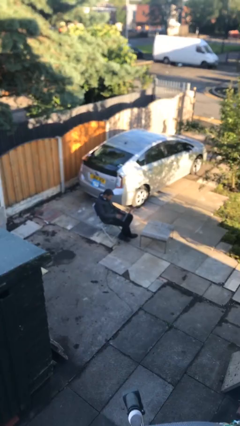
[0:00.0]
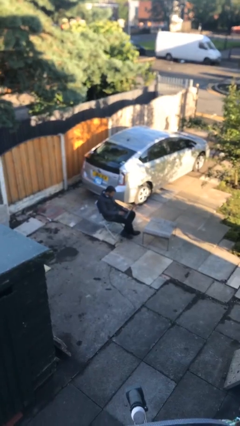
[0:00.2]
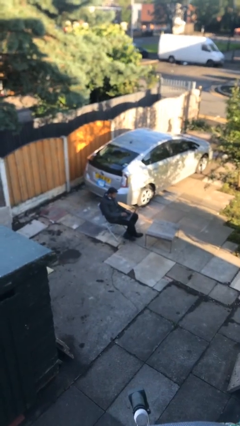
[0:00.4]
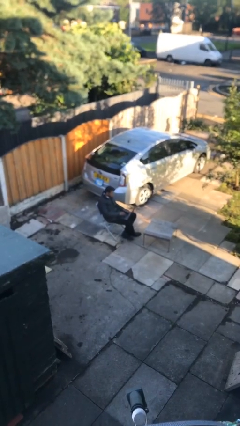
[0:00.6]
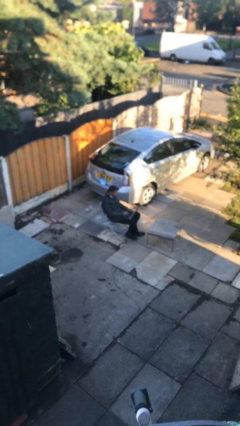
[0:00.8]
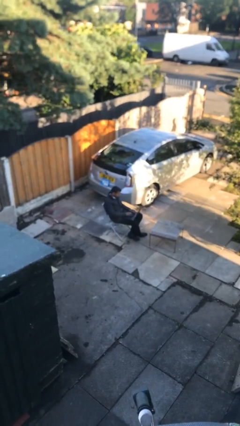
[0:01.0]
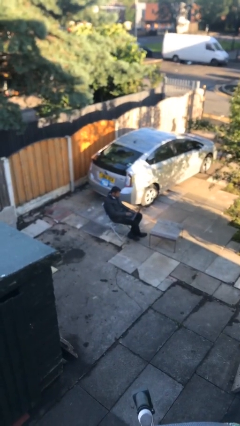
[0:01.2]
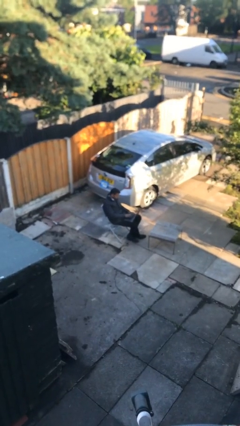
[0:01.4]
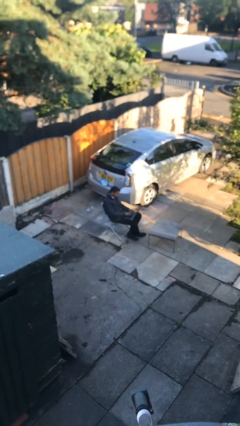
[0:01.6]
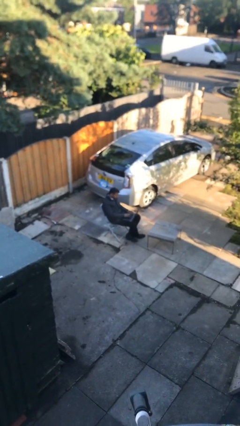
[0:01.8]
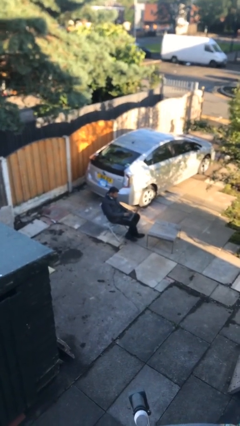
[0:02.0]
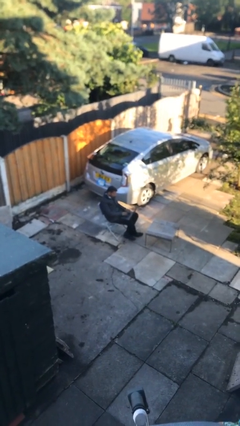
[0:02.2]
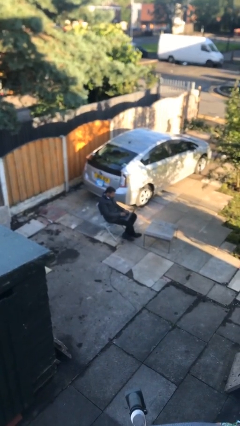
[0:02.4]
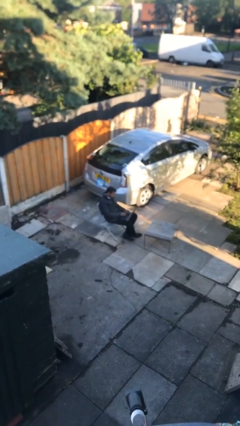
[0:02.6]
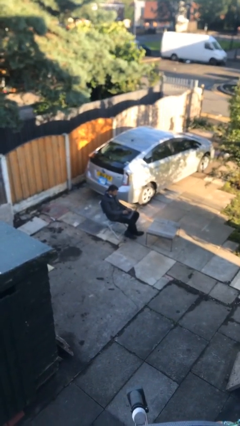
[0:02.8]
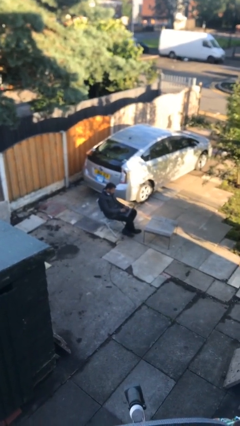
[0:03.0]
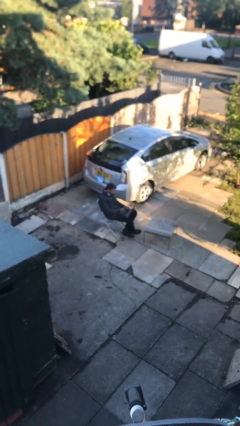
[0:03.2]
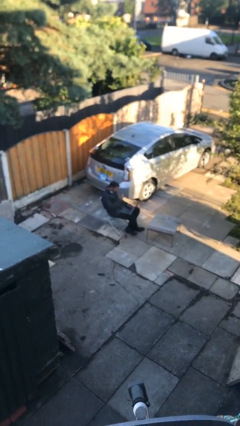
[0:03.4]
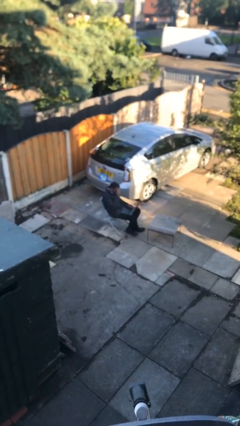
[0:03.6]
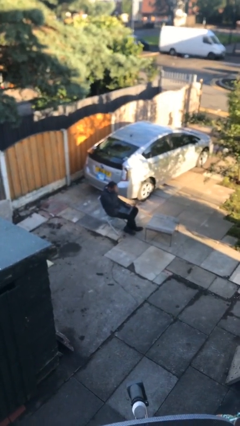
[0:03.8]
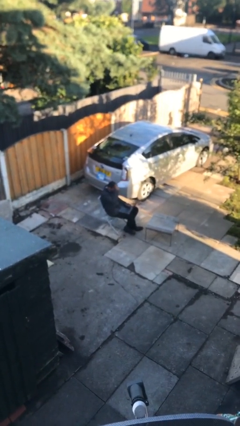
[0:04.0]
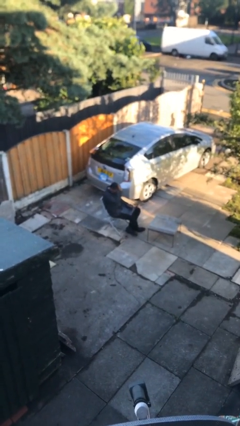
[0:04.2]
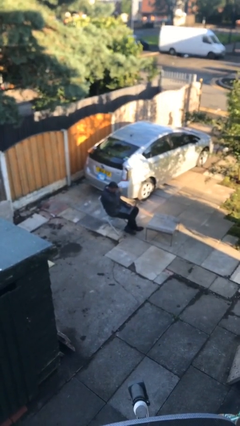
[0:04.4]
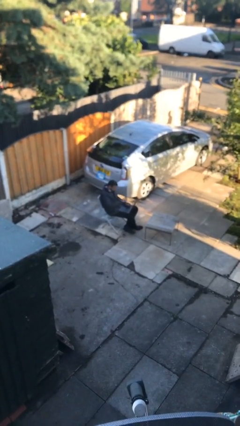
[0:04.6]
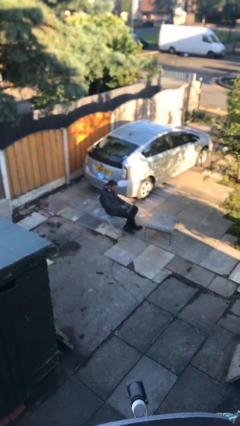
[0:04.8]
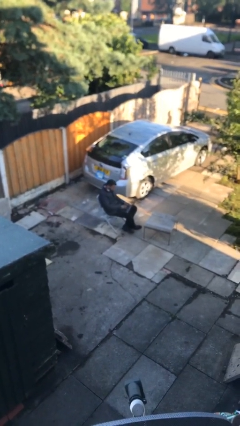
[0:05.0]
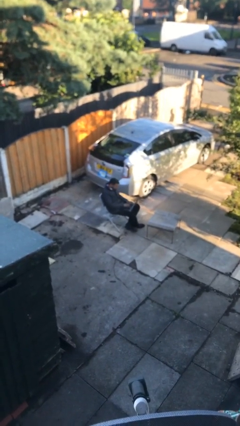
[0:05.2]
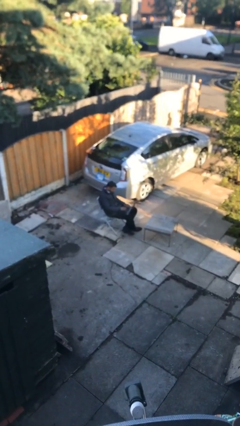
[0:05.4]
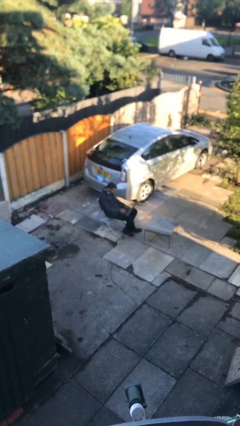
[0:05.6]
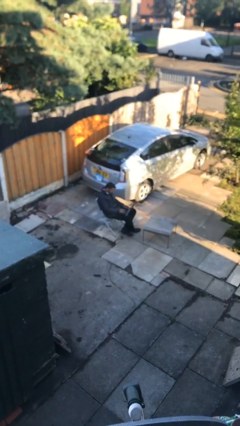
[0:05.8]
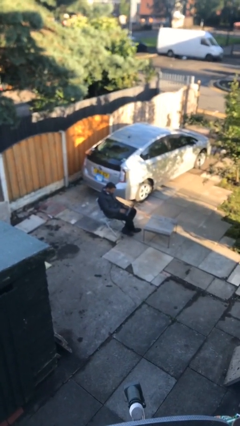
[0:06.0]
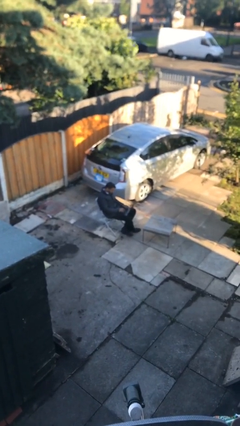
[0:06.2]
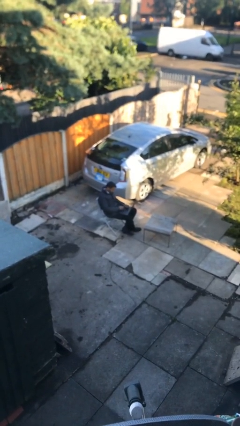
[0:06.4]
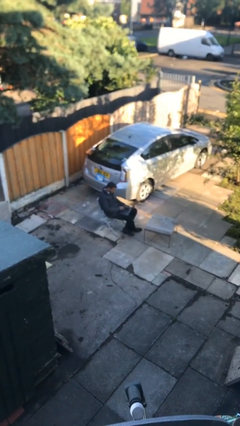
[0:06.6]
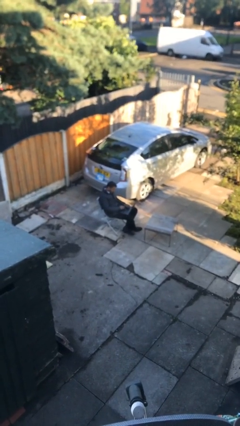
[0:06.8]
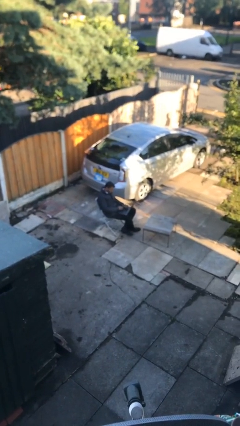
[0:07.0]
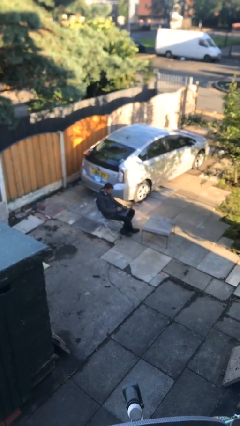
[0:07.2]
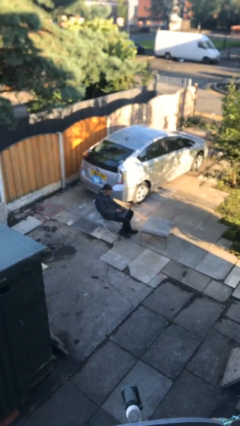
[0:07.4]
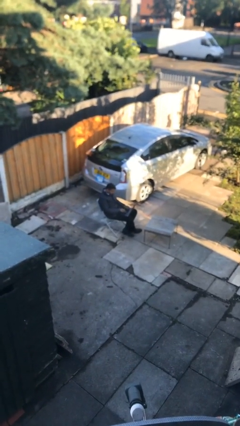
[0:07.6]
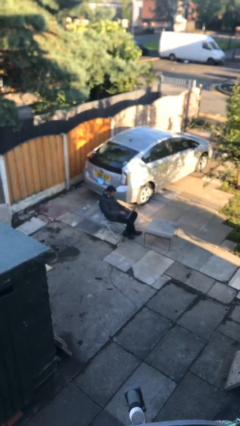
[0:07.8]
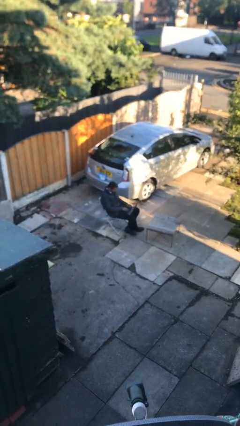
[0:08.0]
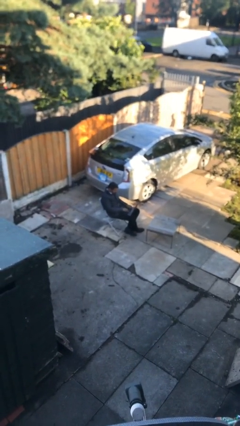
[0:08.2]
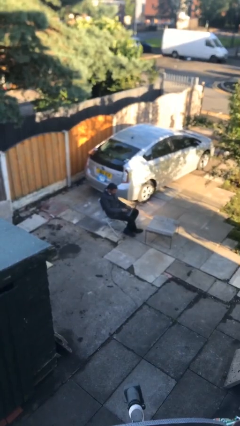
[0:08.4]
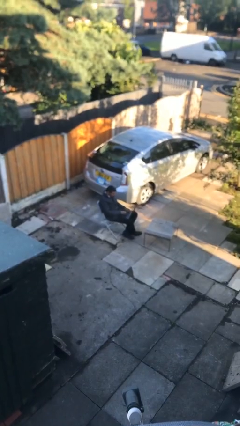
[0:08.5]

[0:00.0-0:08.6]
person interacts with laptop

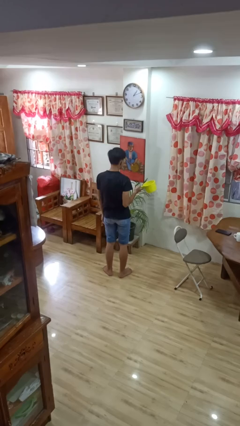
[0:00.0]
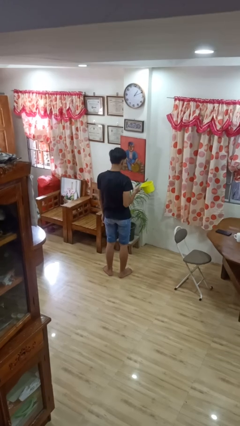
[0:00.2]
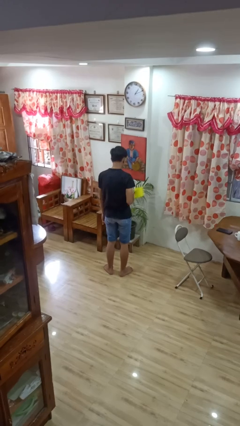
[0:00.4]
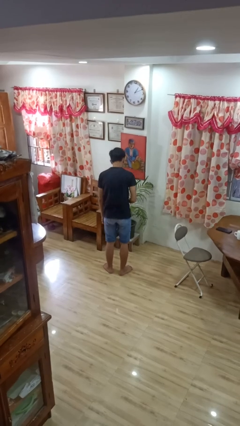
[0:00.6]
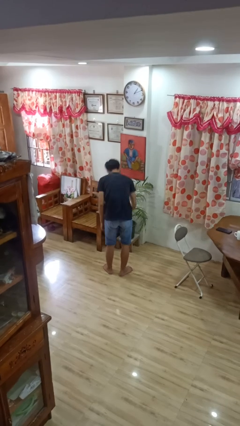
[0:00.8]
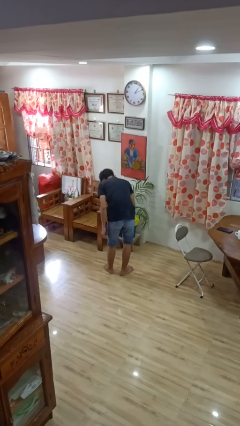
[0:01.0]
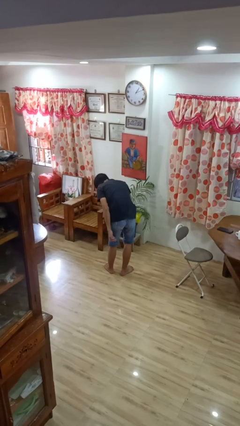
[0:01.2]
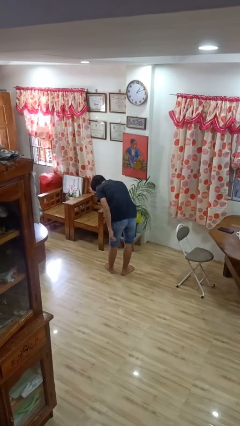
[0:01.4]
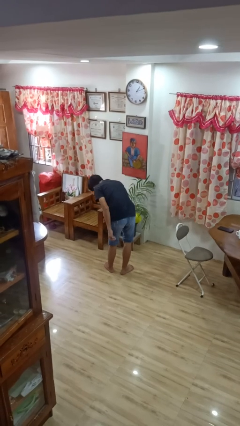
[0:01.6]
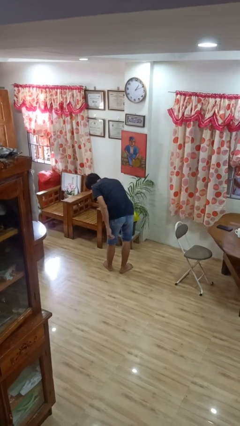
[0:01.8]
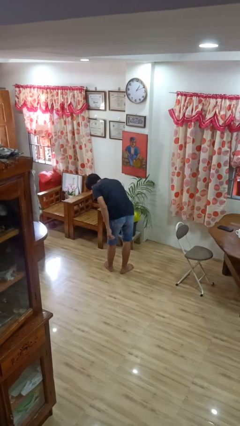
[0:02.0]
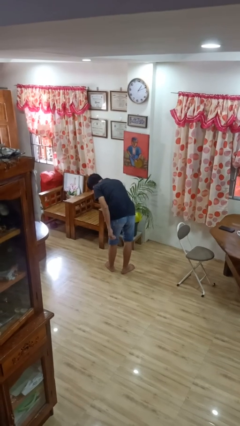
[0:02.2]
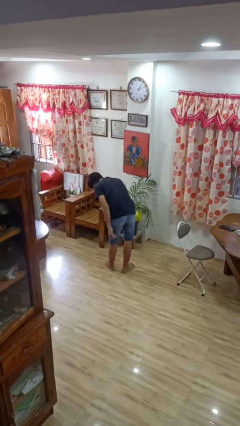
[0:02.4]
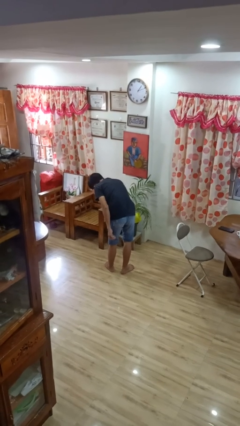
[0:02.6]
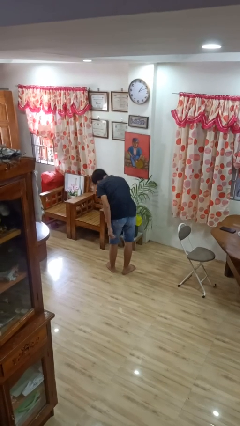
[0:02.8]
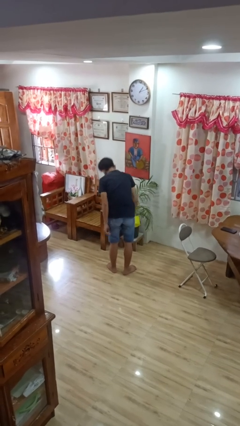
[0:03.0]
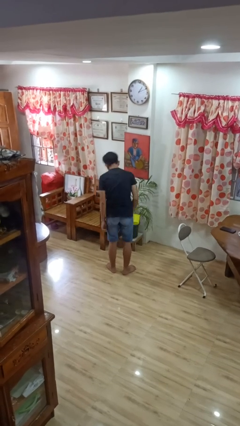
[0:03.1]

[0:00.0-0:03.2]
person waters houseplant

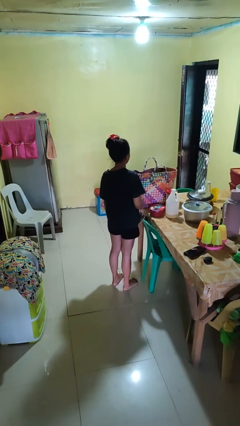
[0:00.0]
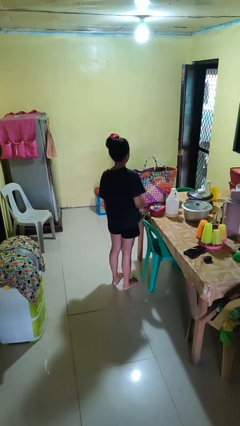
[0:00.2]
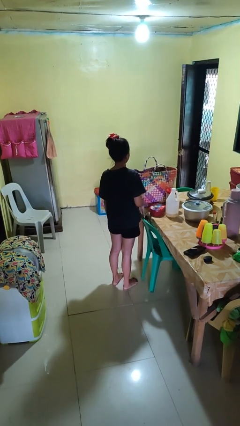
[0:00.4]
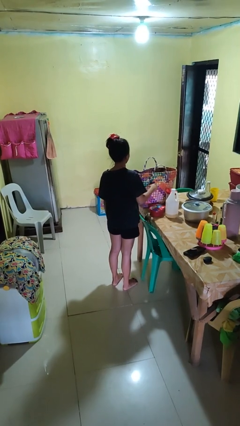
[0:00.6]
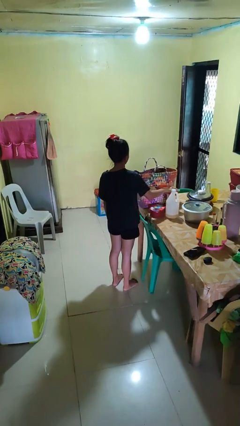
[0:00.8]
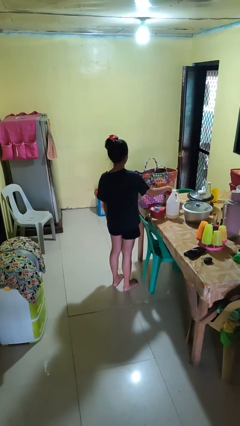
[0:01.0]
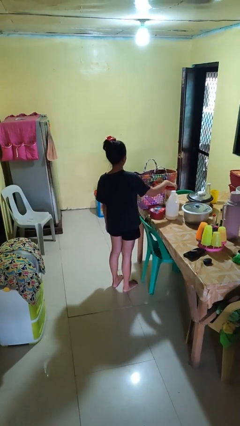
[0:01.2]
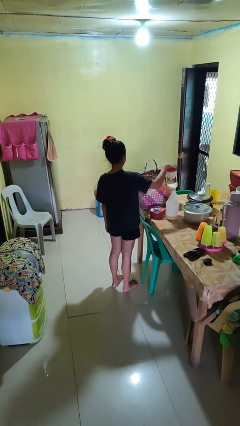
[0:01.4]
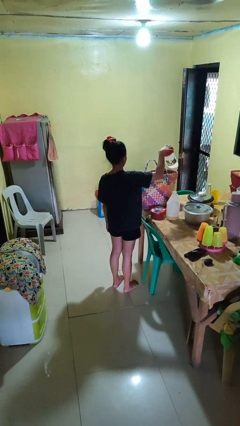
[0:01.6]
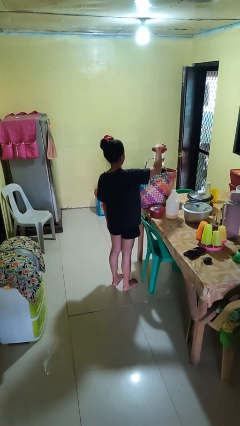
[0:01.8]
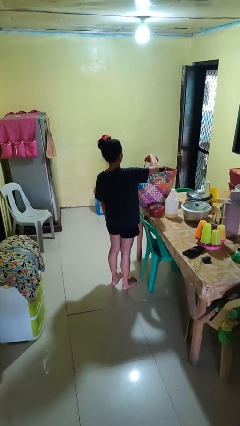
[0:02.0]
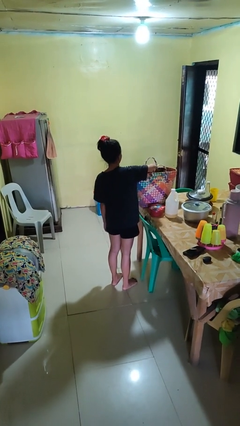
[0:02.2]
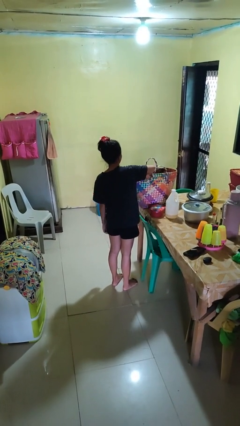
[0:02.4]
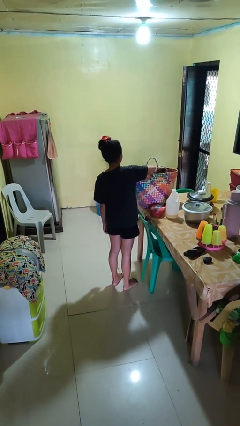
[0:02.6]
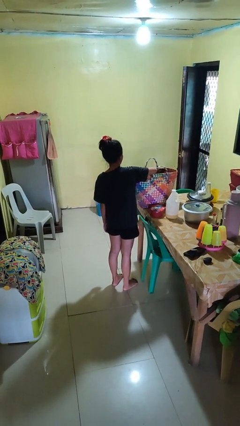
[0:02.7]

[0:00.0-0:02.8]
person puts object into basket

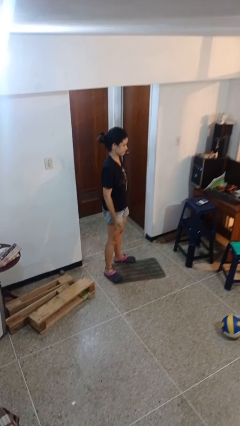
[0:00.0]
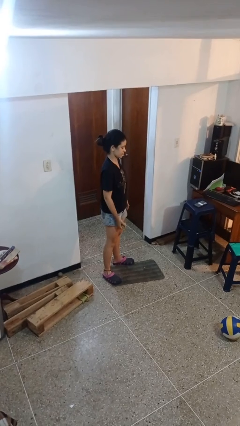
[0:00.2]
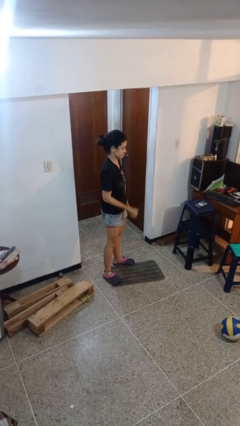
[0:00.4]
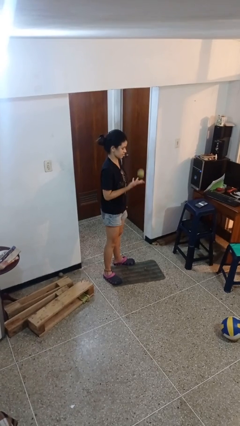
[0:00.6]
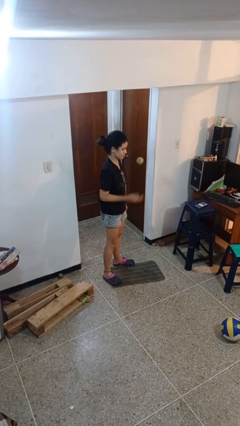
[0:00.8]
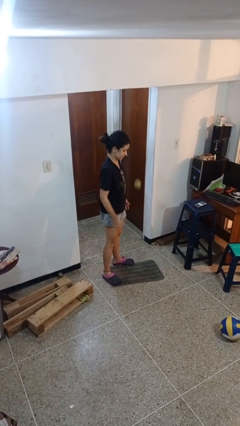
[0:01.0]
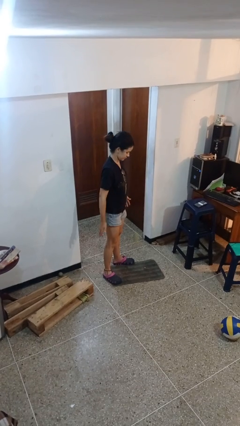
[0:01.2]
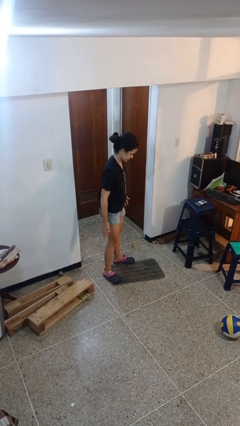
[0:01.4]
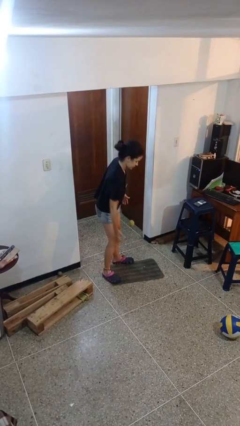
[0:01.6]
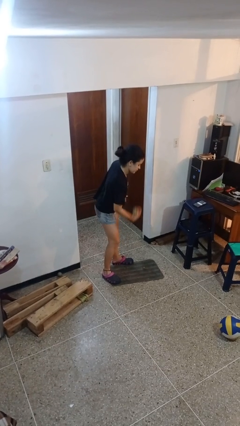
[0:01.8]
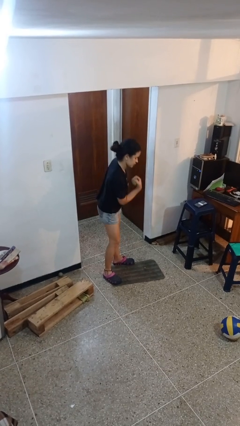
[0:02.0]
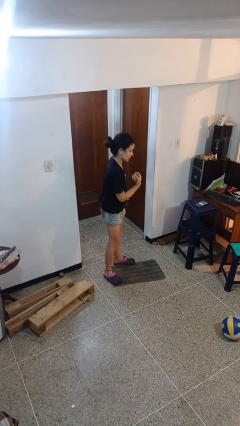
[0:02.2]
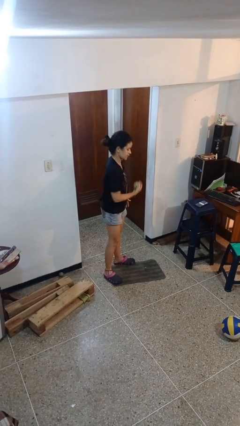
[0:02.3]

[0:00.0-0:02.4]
person bounces ball on floor

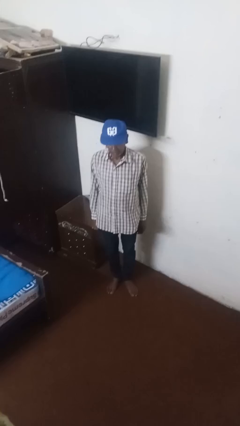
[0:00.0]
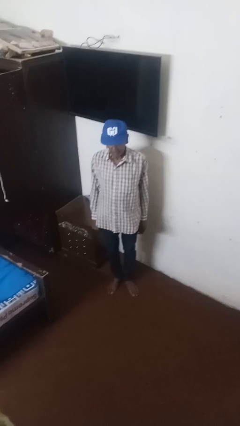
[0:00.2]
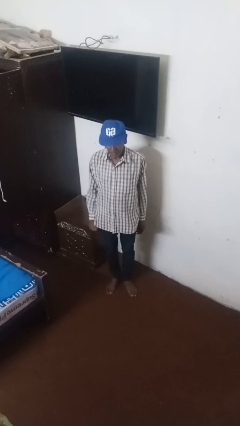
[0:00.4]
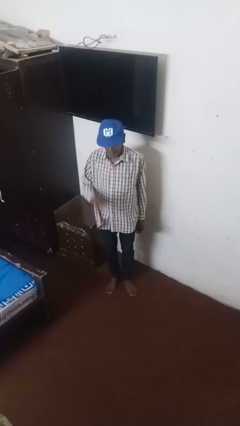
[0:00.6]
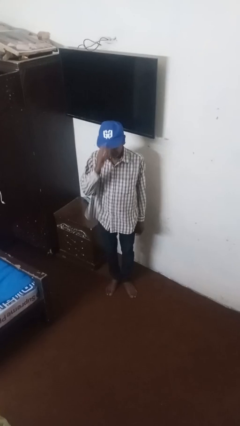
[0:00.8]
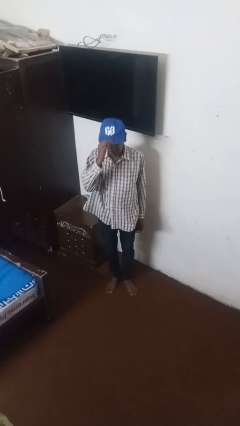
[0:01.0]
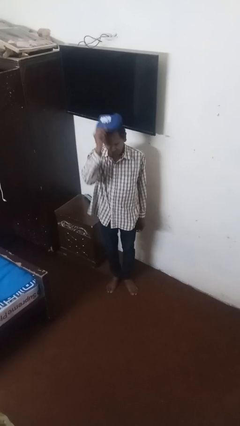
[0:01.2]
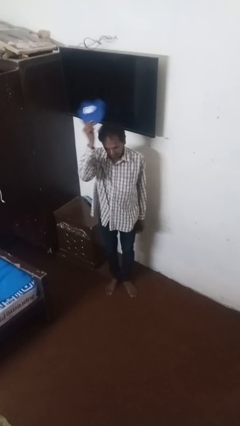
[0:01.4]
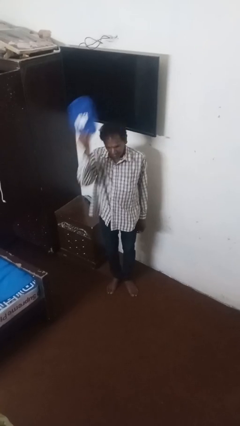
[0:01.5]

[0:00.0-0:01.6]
person takes off hat
